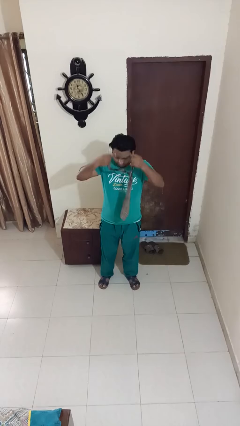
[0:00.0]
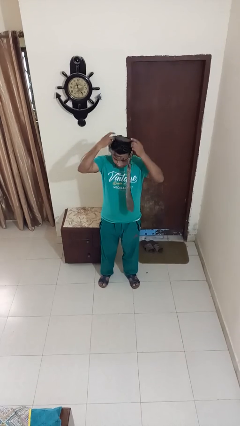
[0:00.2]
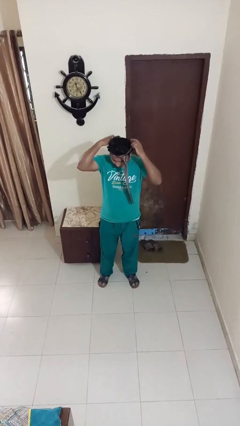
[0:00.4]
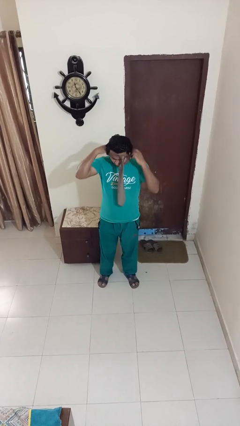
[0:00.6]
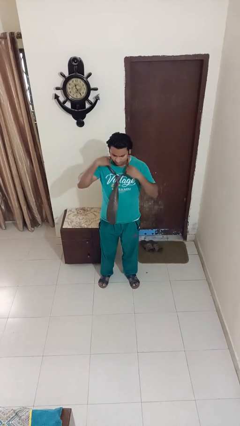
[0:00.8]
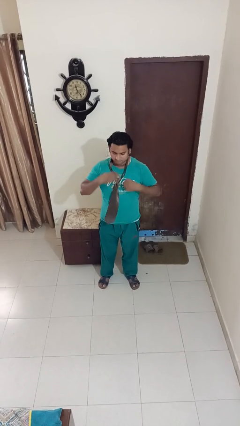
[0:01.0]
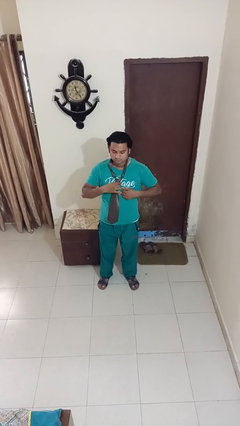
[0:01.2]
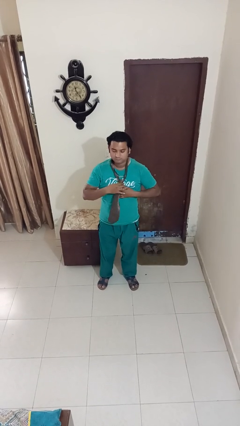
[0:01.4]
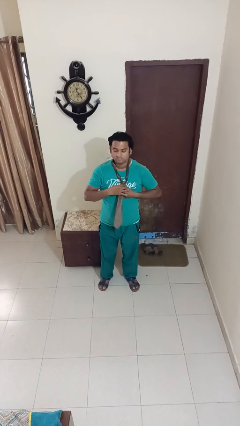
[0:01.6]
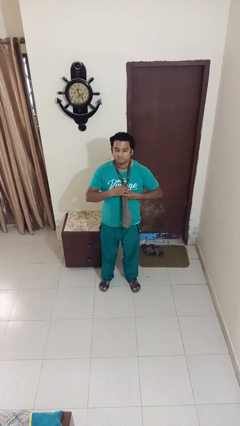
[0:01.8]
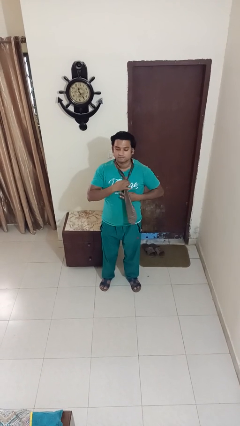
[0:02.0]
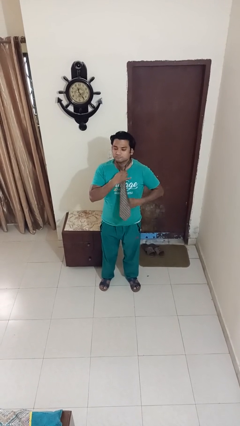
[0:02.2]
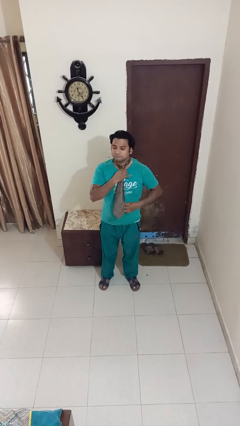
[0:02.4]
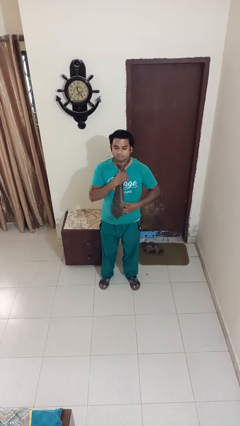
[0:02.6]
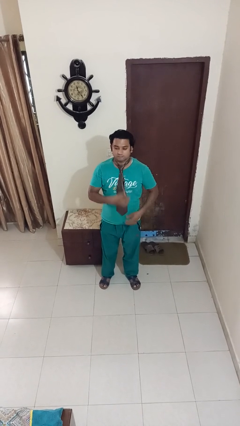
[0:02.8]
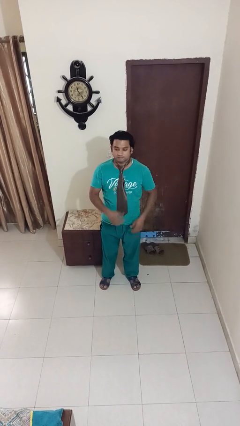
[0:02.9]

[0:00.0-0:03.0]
person puts on necktie

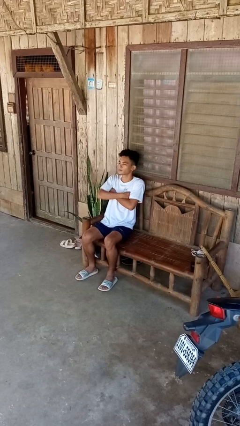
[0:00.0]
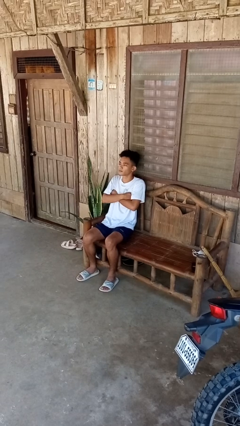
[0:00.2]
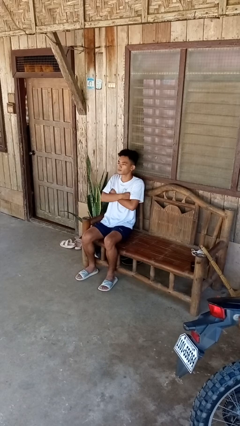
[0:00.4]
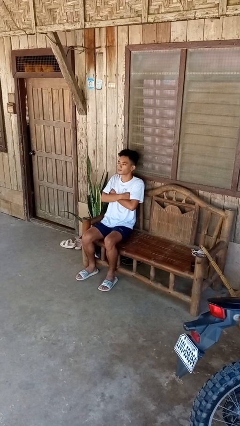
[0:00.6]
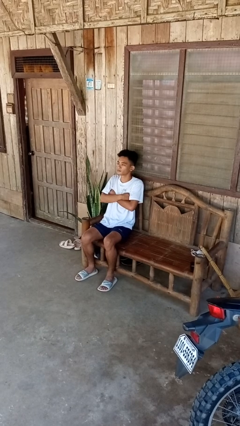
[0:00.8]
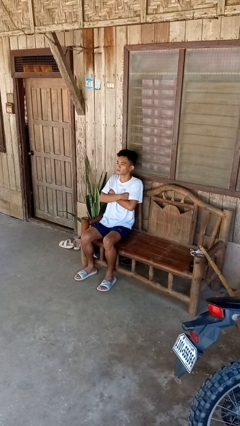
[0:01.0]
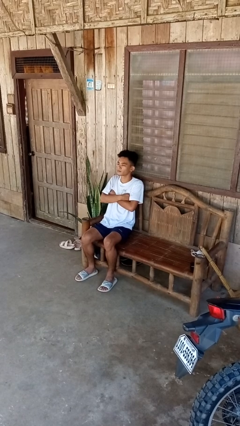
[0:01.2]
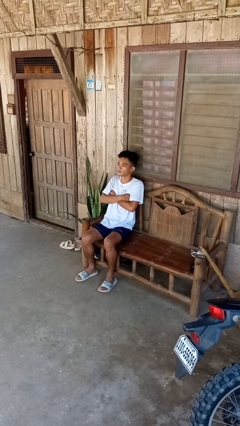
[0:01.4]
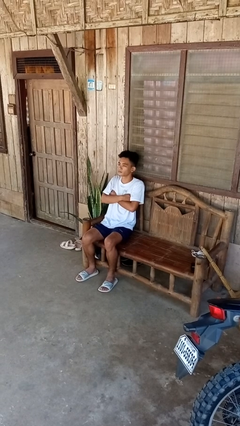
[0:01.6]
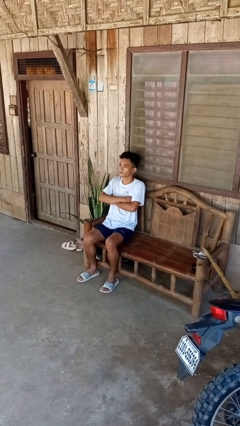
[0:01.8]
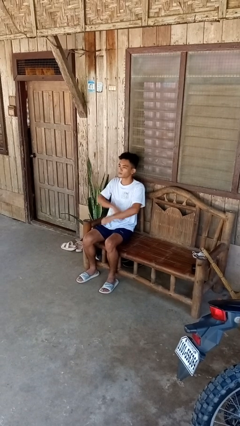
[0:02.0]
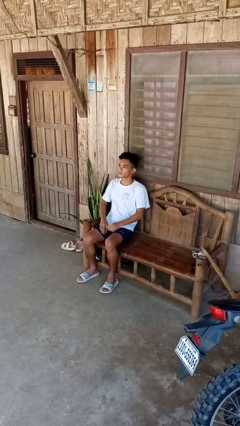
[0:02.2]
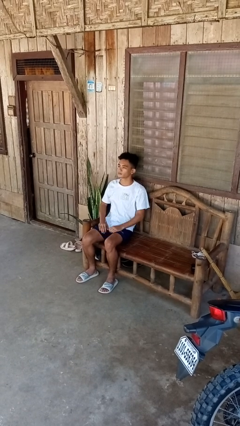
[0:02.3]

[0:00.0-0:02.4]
person crosses arms

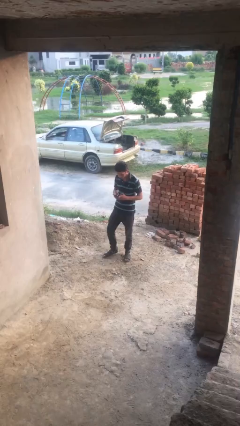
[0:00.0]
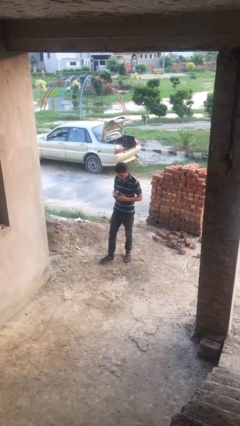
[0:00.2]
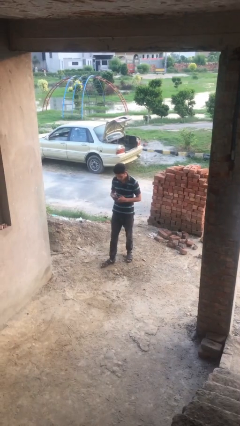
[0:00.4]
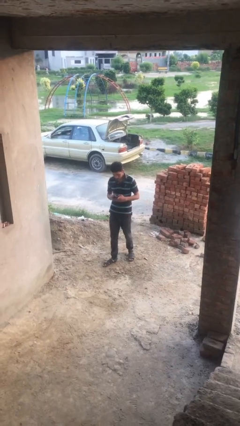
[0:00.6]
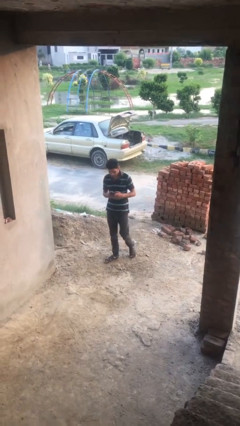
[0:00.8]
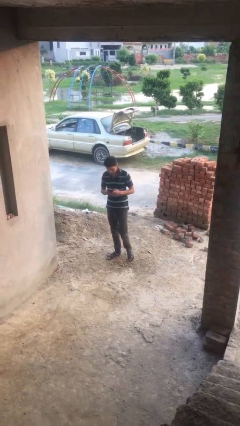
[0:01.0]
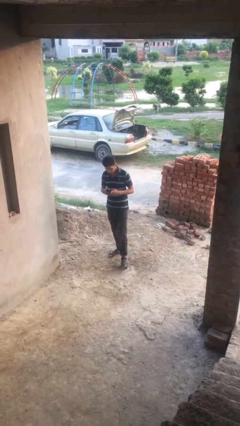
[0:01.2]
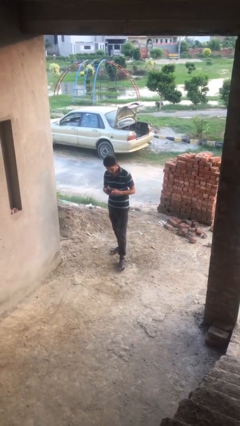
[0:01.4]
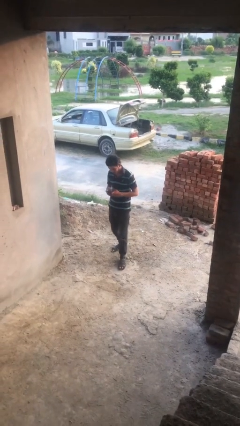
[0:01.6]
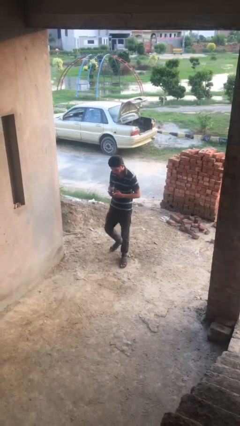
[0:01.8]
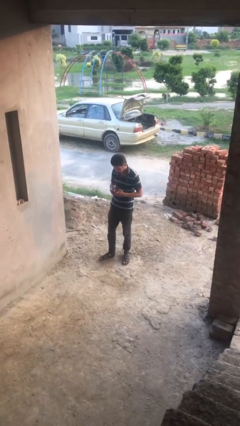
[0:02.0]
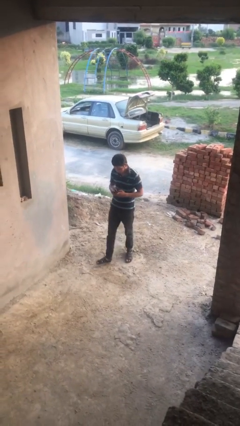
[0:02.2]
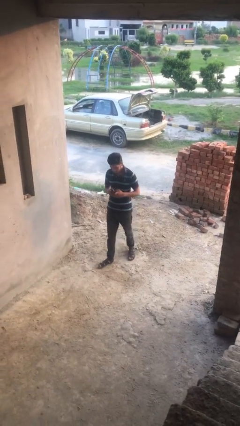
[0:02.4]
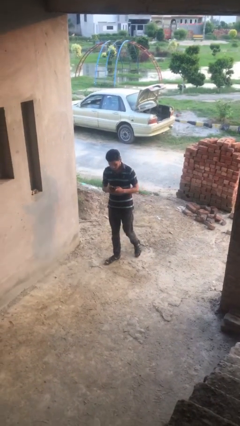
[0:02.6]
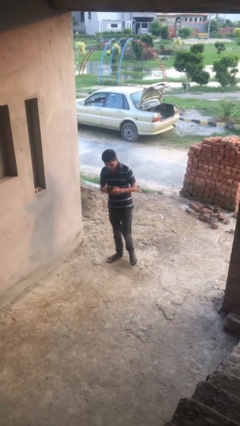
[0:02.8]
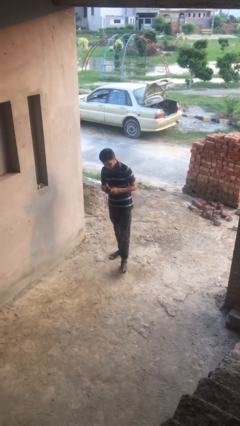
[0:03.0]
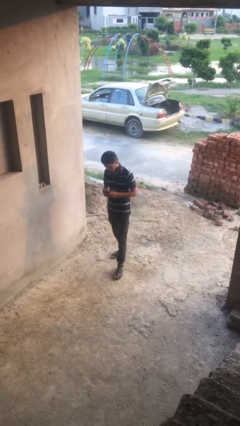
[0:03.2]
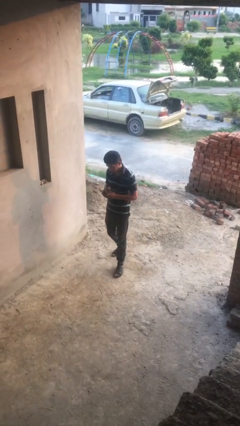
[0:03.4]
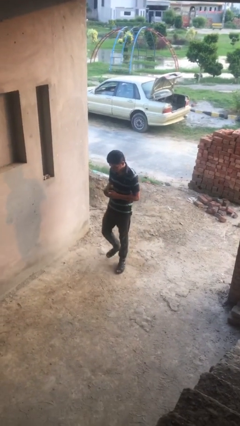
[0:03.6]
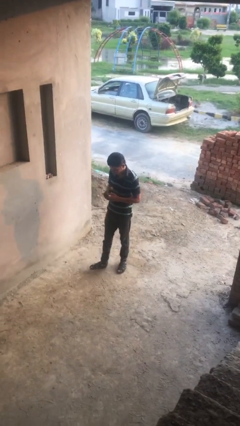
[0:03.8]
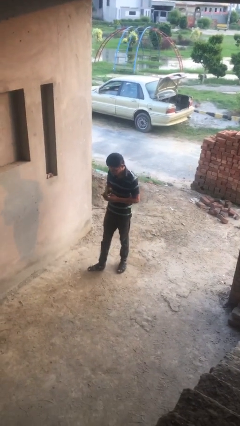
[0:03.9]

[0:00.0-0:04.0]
person texts on phone

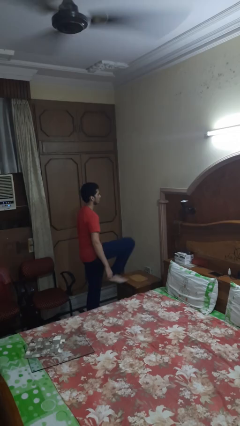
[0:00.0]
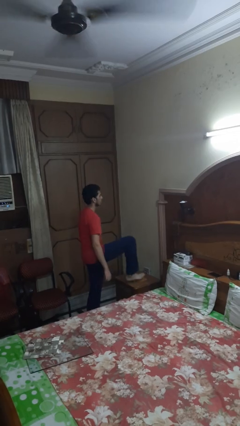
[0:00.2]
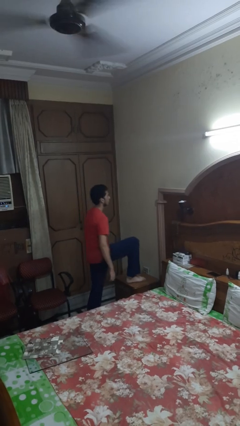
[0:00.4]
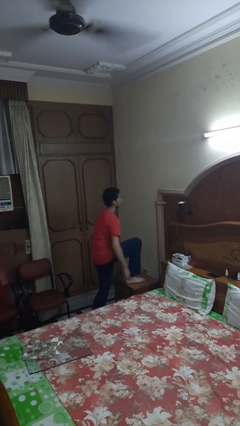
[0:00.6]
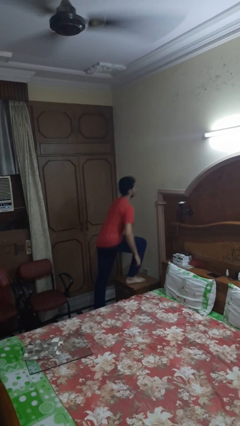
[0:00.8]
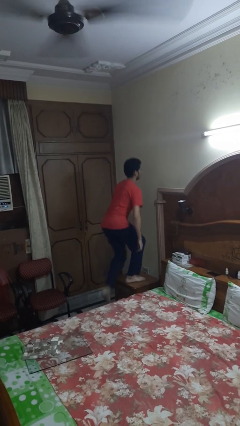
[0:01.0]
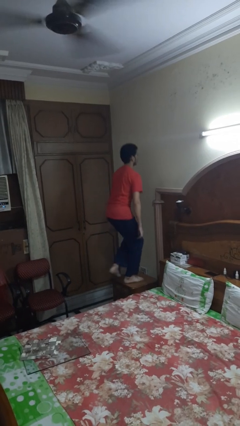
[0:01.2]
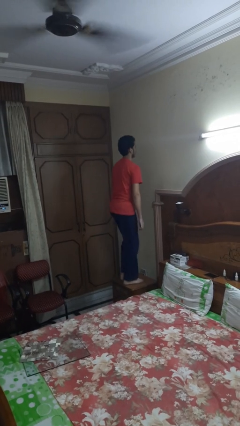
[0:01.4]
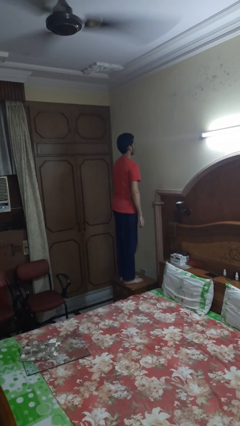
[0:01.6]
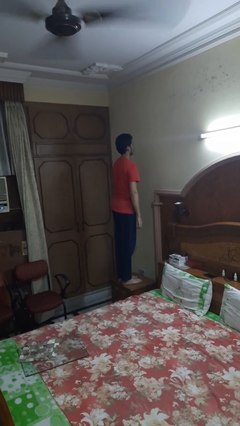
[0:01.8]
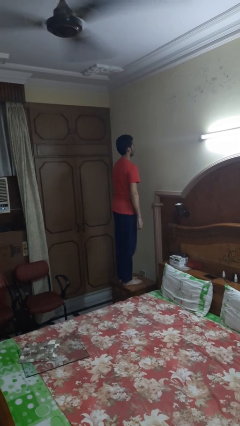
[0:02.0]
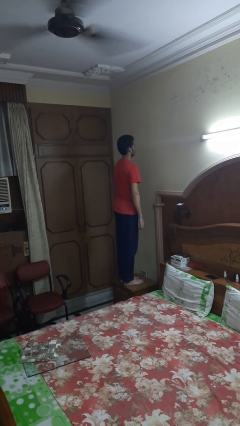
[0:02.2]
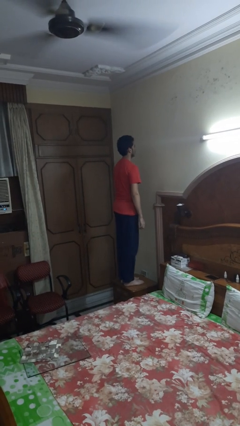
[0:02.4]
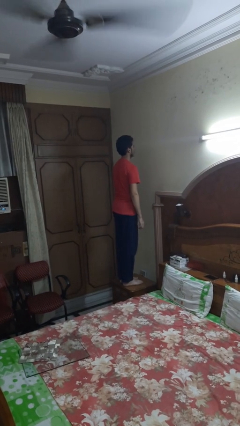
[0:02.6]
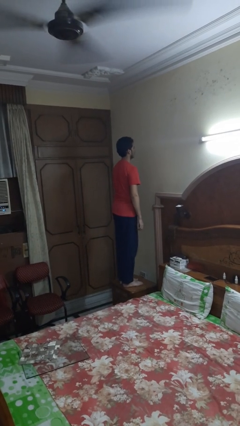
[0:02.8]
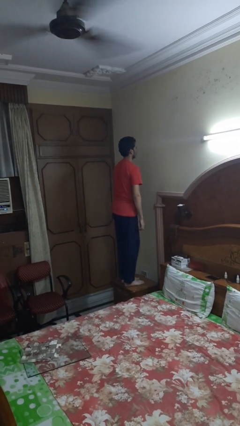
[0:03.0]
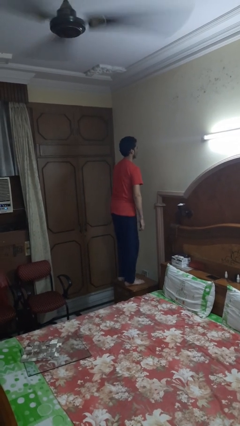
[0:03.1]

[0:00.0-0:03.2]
person climbs on table

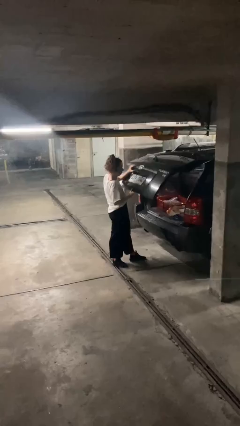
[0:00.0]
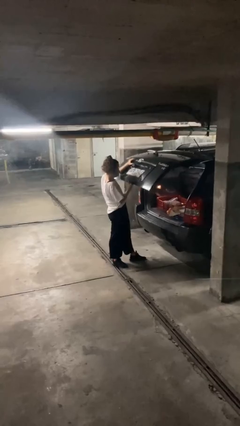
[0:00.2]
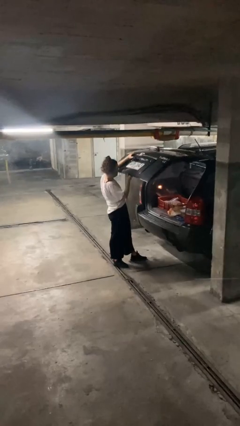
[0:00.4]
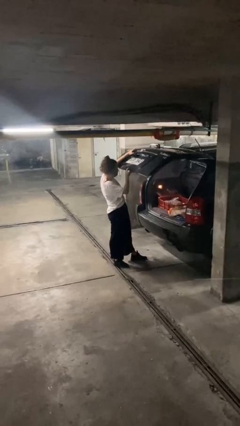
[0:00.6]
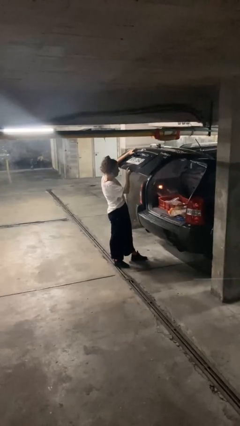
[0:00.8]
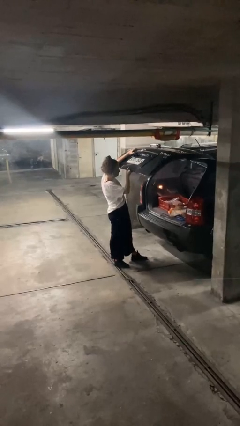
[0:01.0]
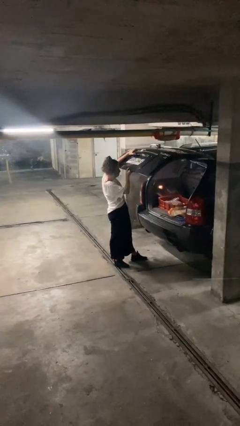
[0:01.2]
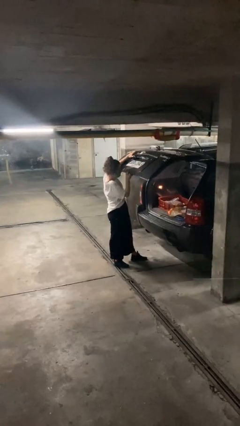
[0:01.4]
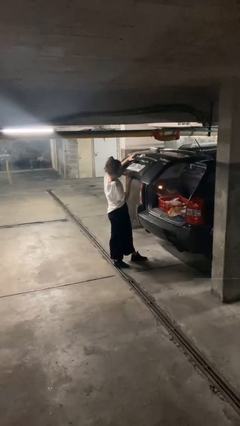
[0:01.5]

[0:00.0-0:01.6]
person opens car trunk

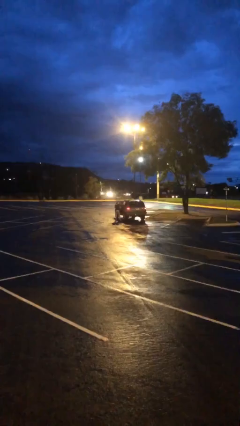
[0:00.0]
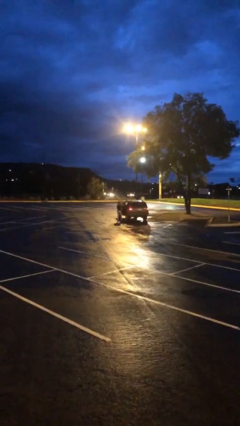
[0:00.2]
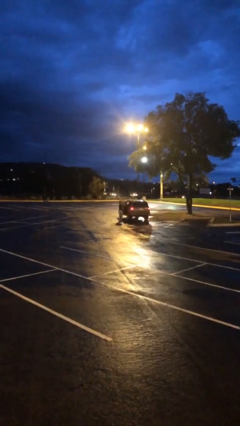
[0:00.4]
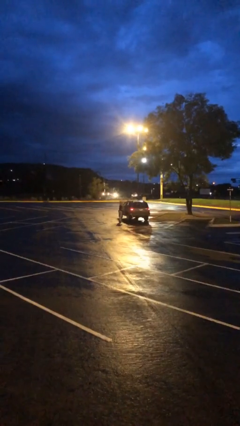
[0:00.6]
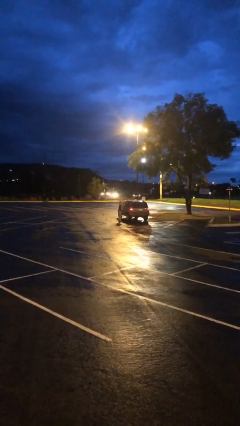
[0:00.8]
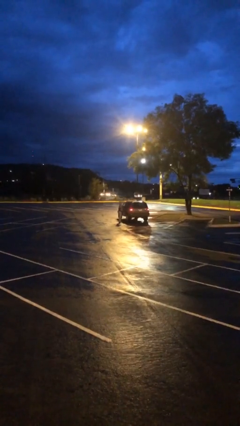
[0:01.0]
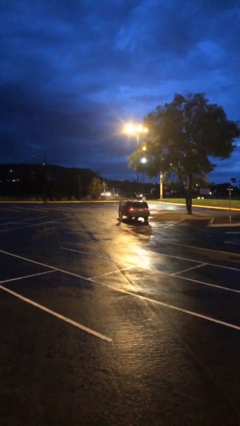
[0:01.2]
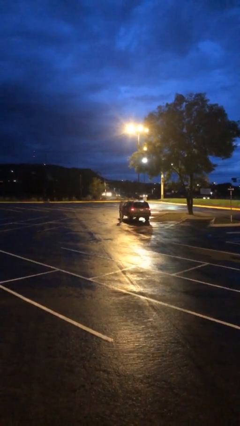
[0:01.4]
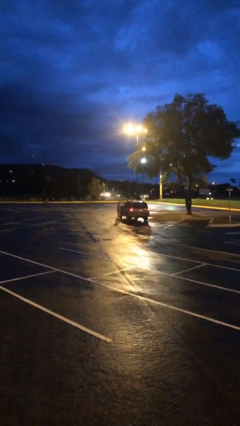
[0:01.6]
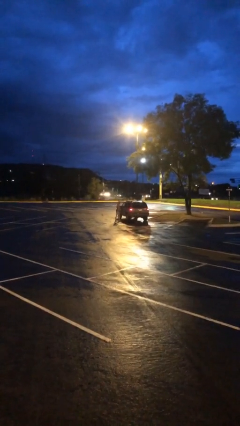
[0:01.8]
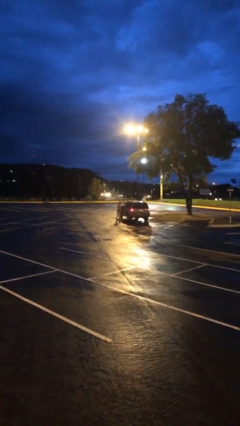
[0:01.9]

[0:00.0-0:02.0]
person closes car door

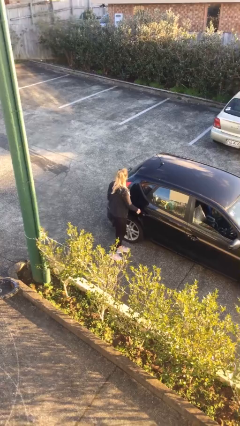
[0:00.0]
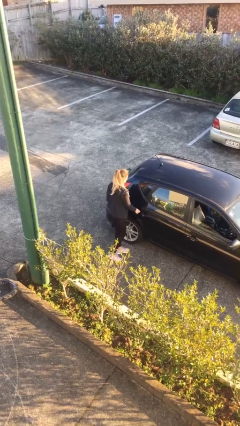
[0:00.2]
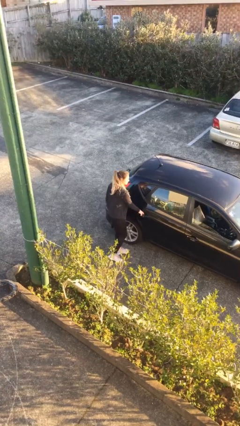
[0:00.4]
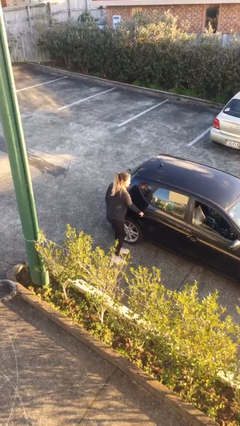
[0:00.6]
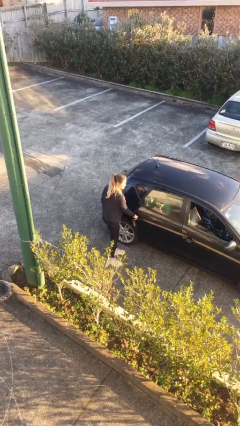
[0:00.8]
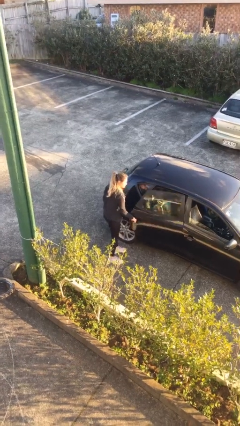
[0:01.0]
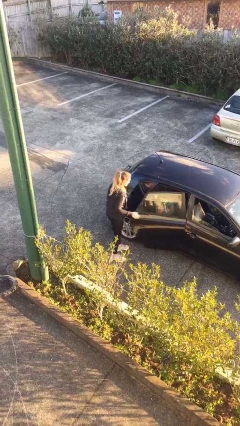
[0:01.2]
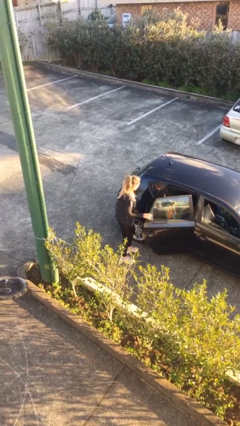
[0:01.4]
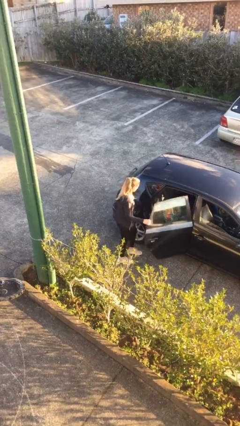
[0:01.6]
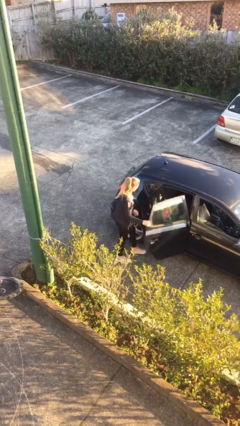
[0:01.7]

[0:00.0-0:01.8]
person opens car door
